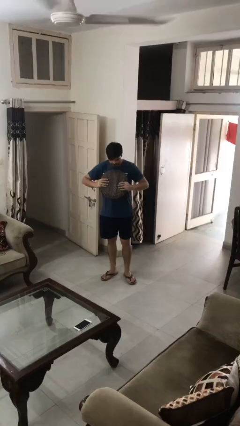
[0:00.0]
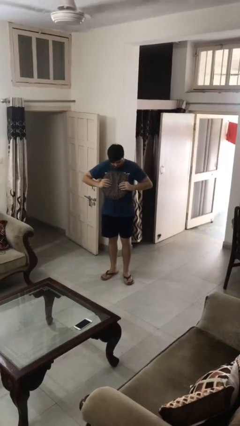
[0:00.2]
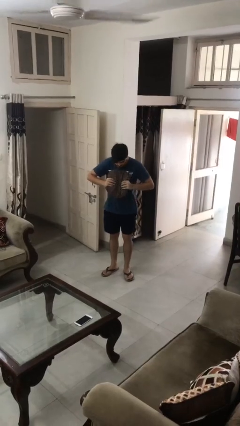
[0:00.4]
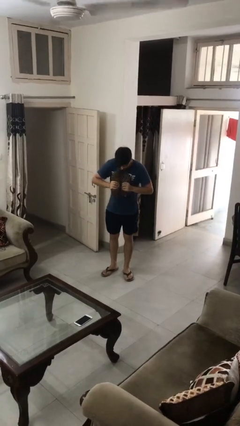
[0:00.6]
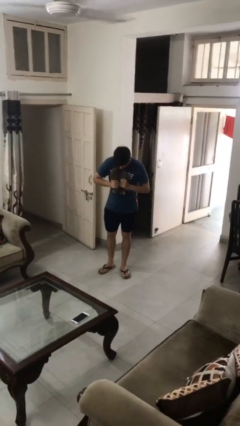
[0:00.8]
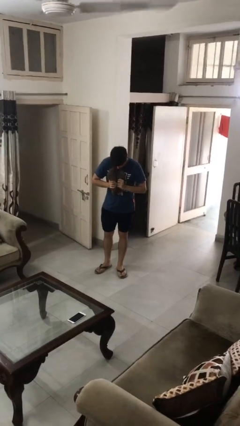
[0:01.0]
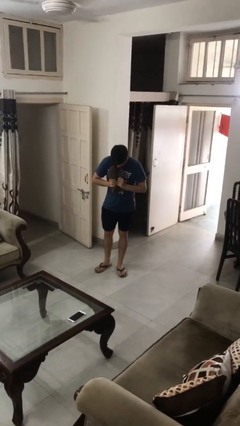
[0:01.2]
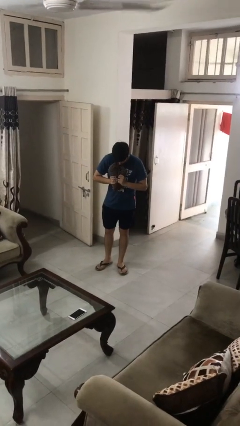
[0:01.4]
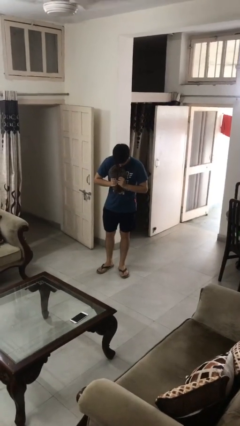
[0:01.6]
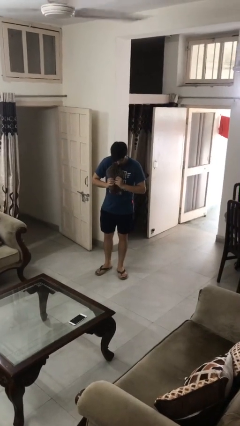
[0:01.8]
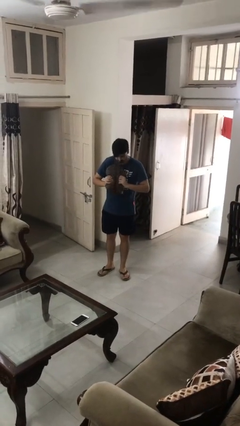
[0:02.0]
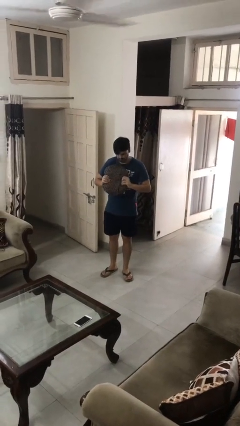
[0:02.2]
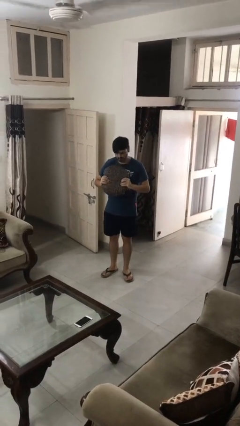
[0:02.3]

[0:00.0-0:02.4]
person squeezes object

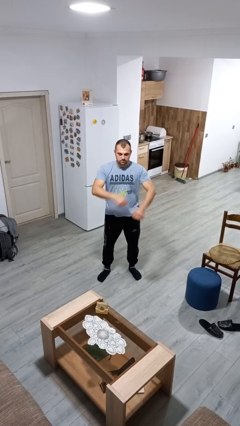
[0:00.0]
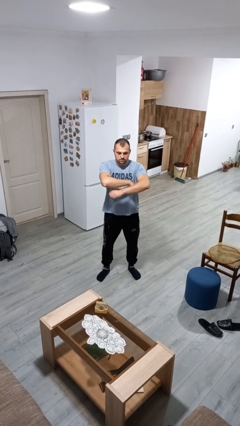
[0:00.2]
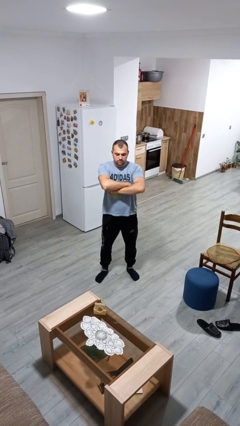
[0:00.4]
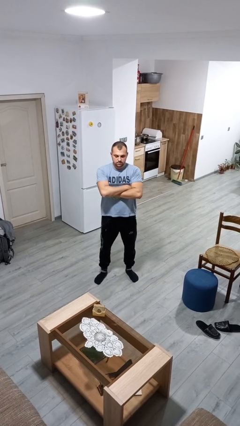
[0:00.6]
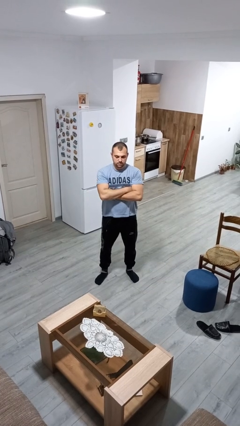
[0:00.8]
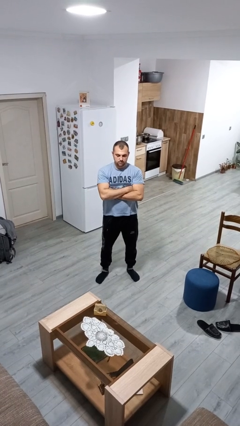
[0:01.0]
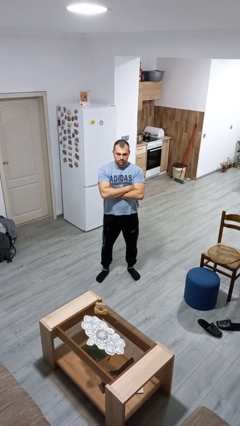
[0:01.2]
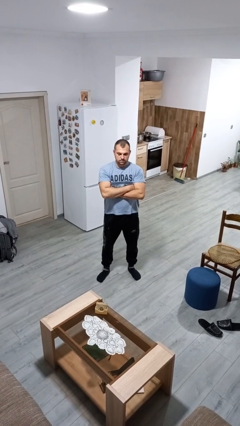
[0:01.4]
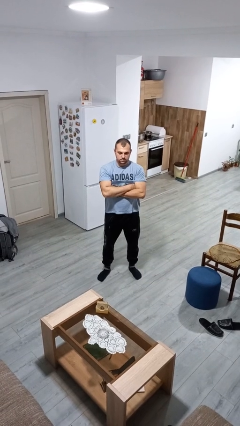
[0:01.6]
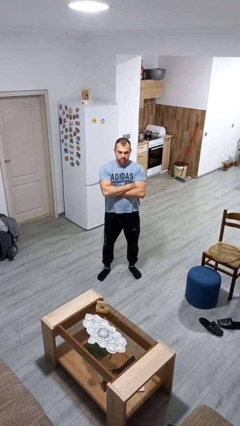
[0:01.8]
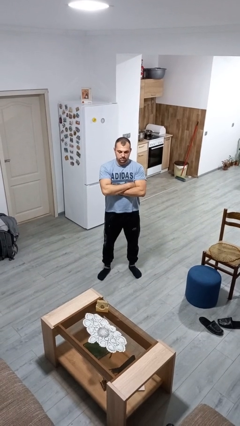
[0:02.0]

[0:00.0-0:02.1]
person crosses arms

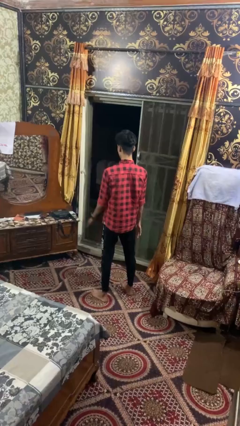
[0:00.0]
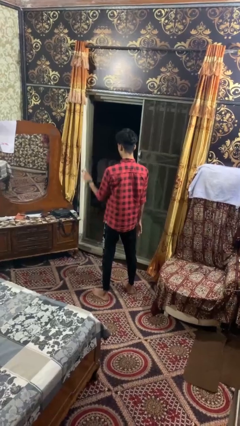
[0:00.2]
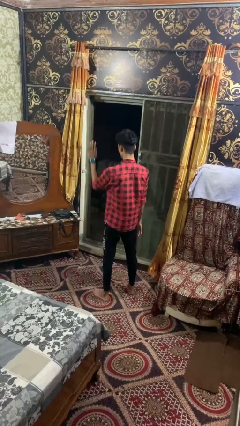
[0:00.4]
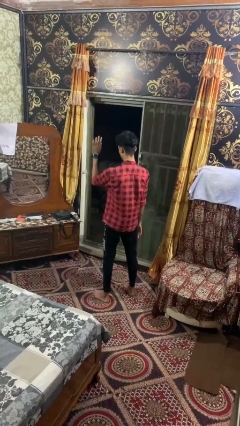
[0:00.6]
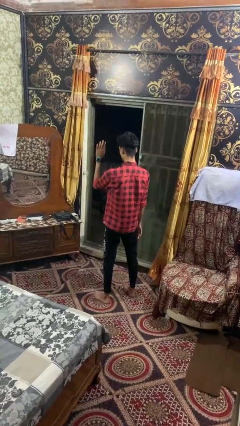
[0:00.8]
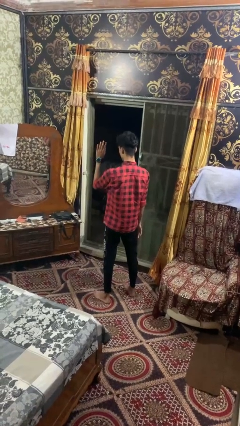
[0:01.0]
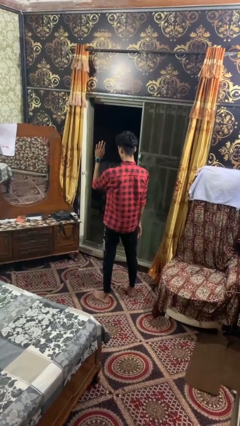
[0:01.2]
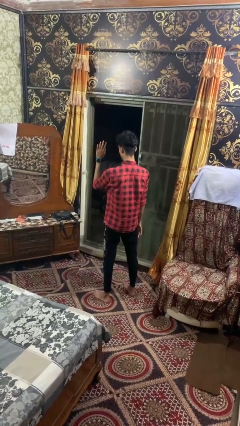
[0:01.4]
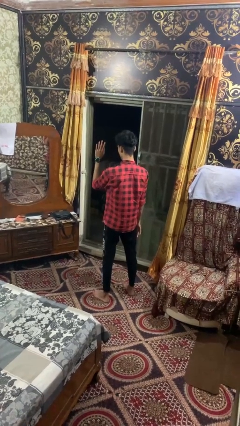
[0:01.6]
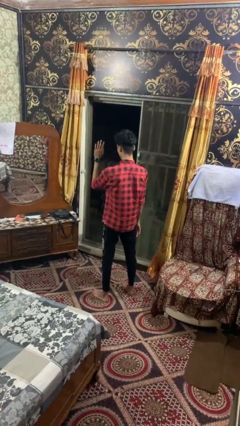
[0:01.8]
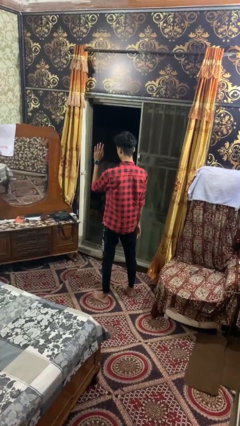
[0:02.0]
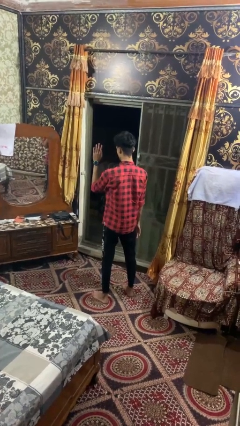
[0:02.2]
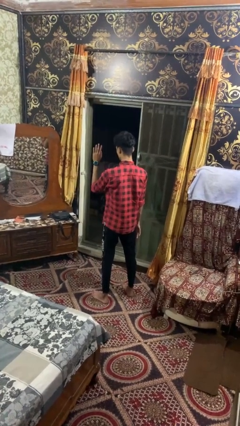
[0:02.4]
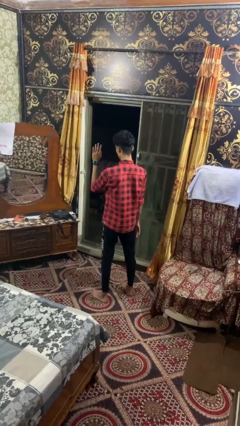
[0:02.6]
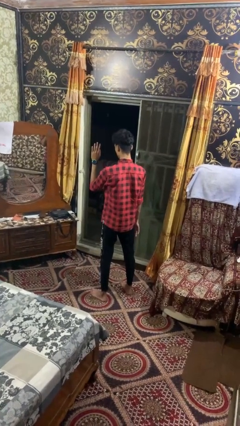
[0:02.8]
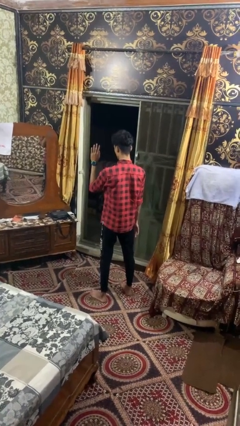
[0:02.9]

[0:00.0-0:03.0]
person gestures swipe left

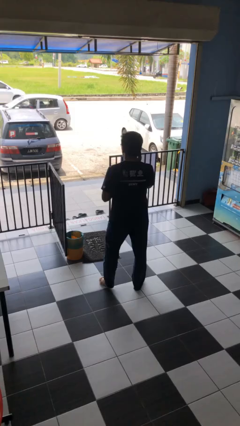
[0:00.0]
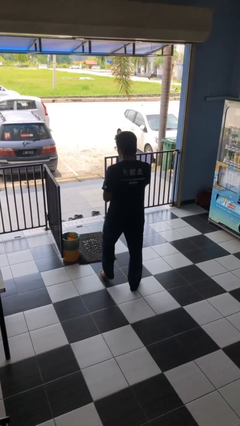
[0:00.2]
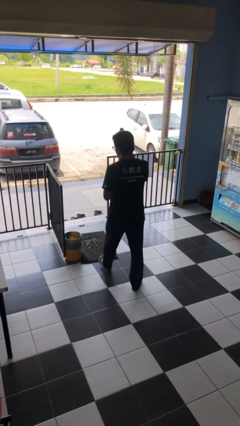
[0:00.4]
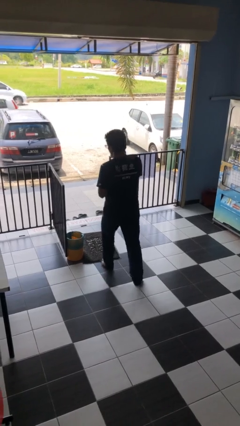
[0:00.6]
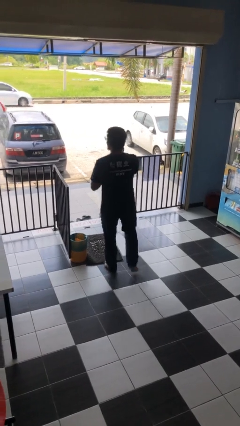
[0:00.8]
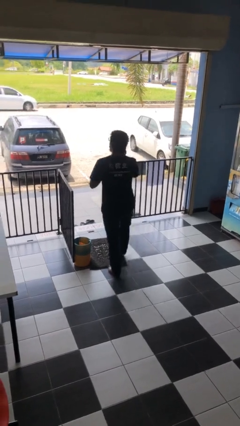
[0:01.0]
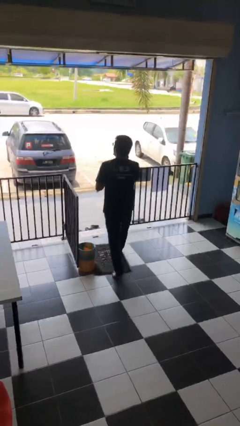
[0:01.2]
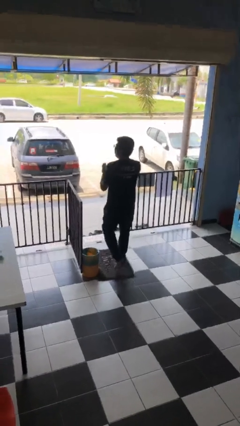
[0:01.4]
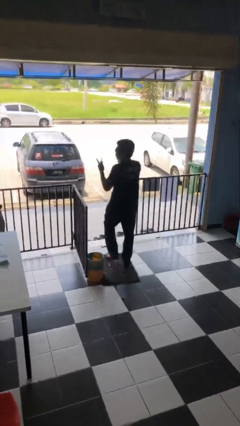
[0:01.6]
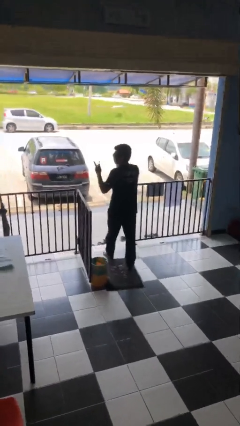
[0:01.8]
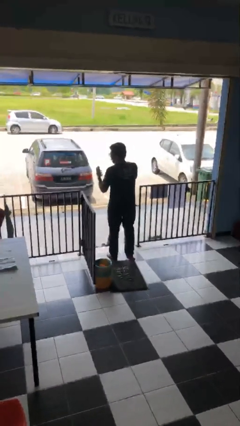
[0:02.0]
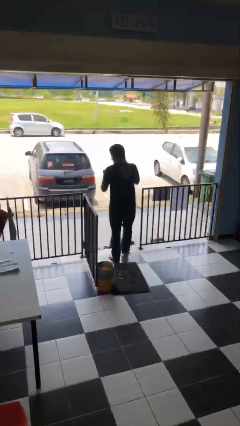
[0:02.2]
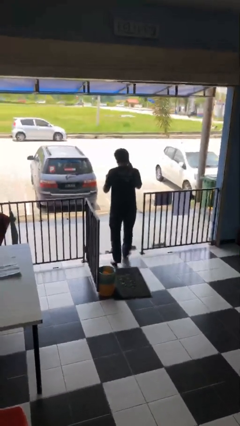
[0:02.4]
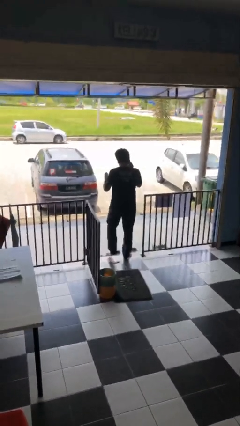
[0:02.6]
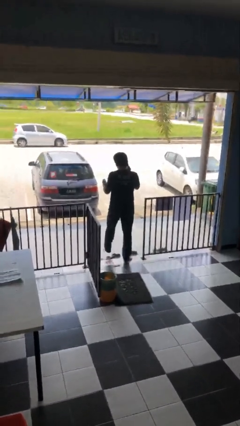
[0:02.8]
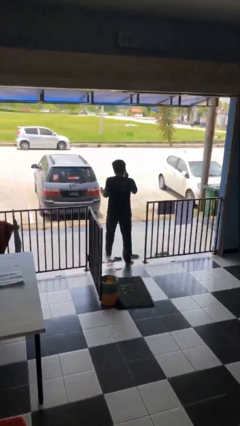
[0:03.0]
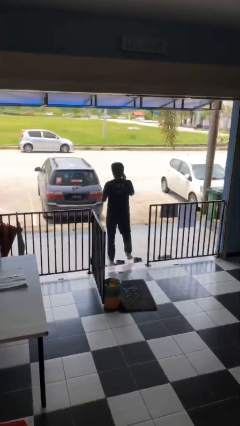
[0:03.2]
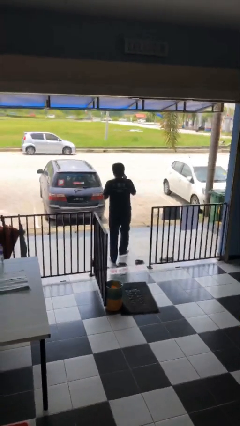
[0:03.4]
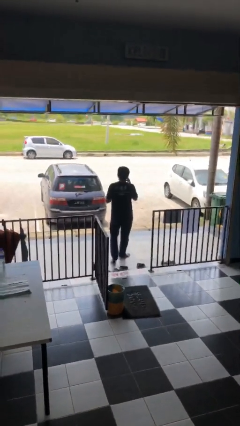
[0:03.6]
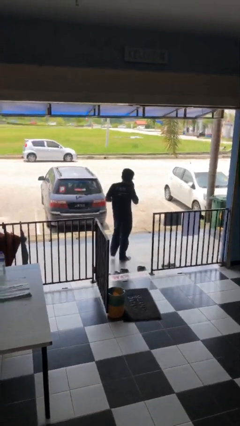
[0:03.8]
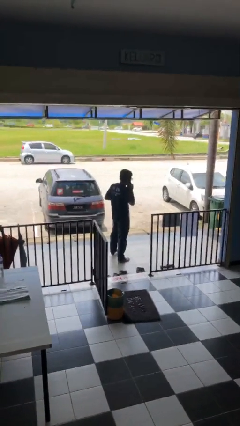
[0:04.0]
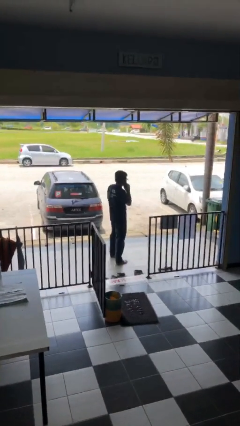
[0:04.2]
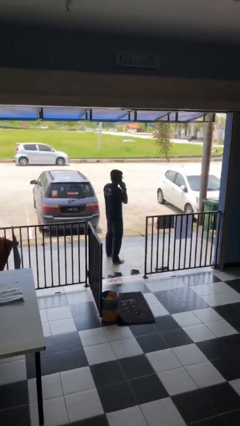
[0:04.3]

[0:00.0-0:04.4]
person exits scene through structure

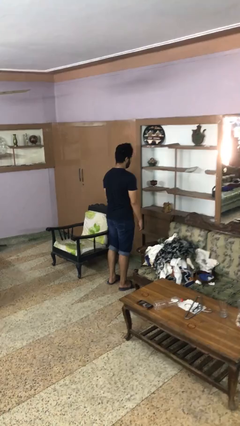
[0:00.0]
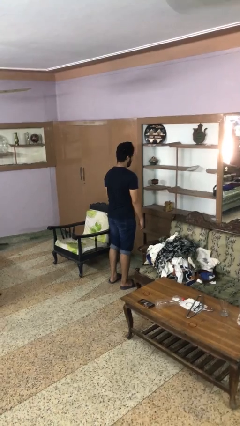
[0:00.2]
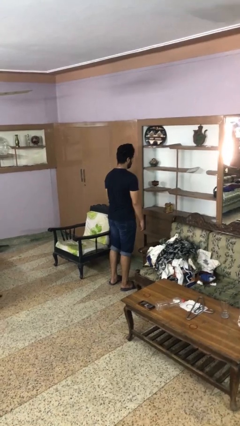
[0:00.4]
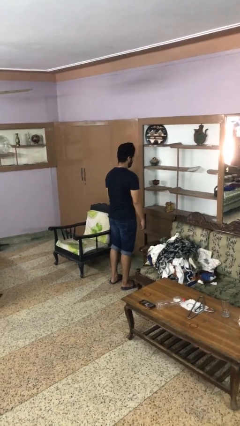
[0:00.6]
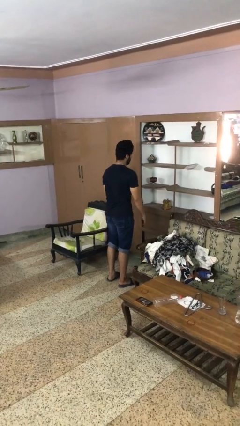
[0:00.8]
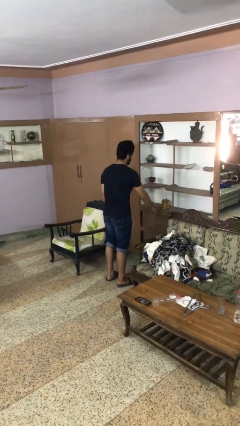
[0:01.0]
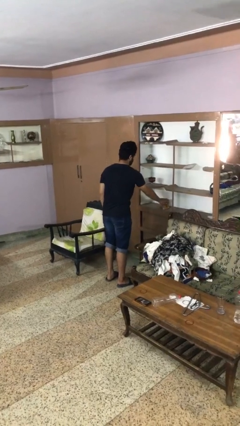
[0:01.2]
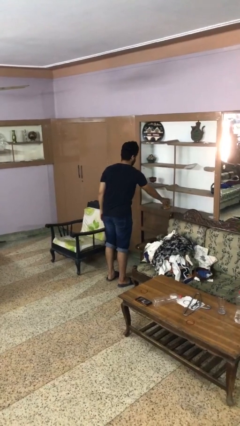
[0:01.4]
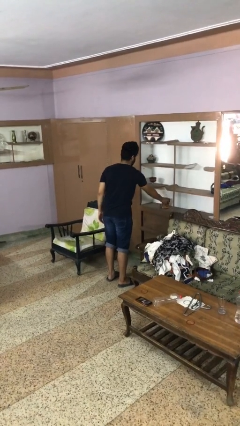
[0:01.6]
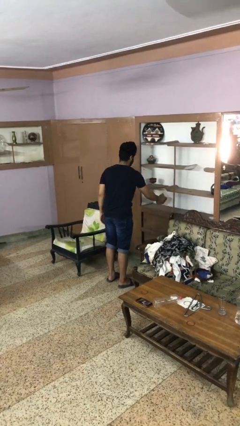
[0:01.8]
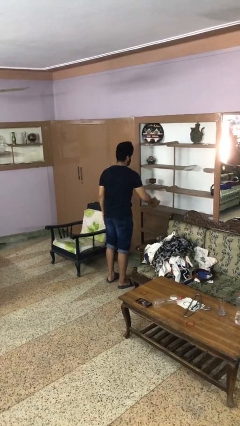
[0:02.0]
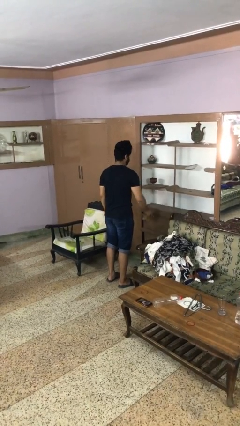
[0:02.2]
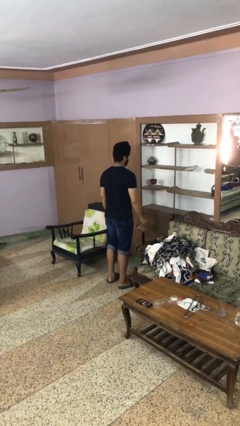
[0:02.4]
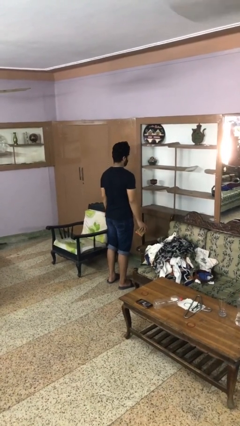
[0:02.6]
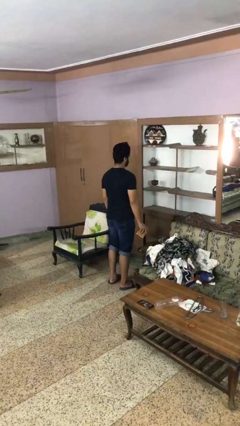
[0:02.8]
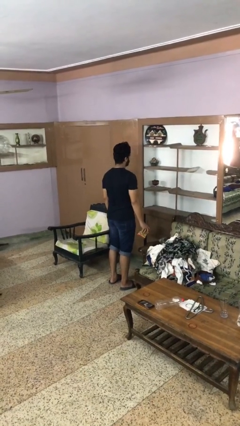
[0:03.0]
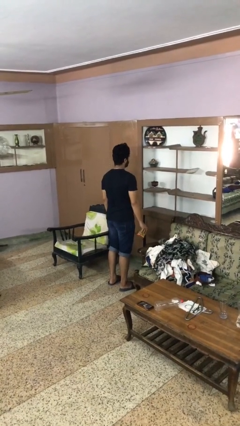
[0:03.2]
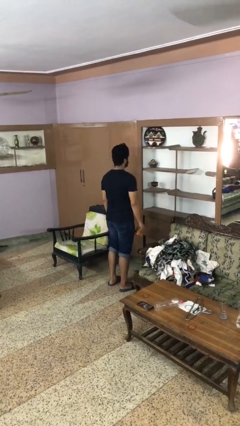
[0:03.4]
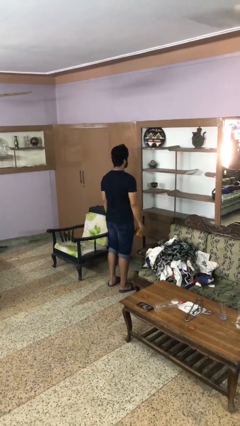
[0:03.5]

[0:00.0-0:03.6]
person picks up object from shelf

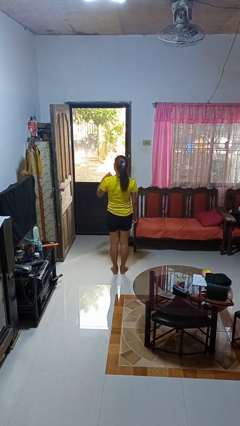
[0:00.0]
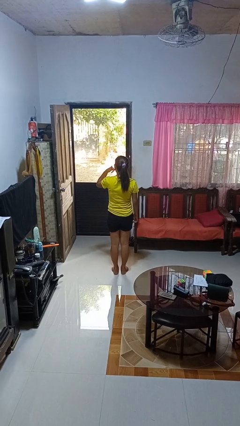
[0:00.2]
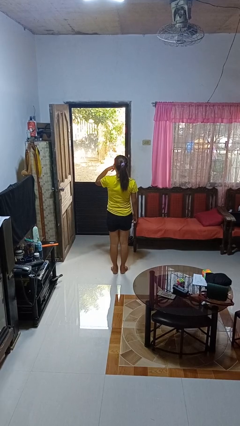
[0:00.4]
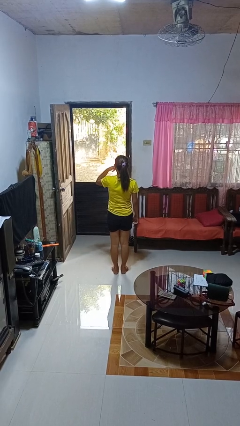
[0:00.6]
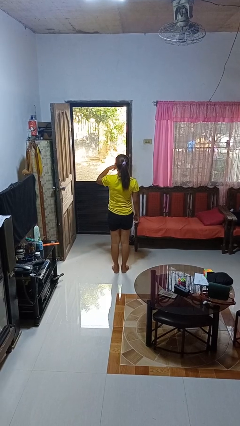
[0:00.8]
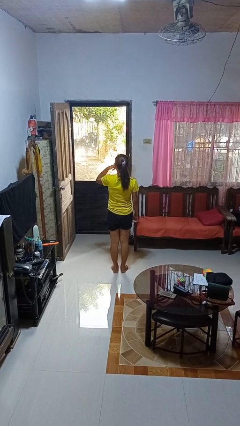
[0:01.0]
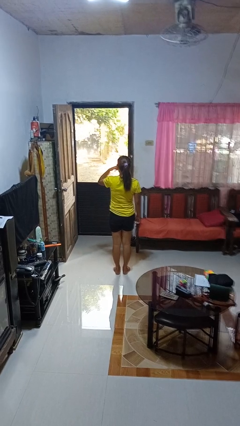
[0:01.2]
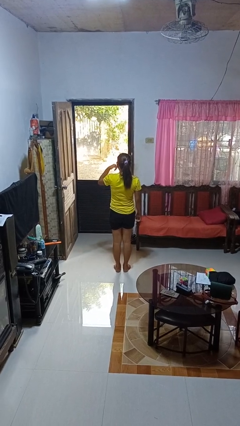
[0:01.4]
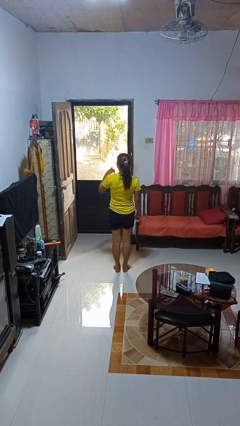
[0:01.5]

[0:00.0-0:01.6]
person gestures call me

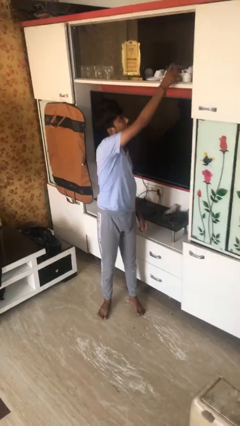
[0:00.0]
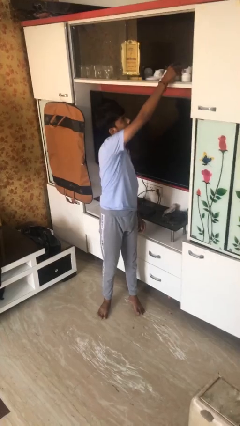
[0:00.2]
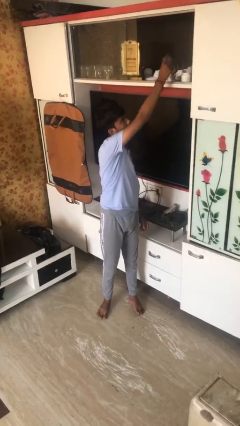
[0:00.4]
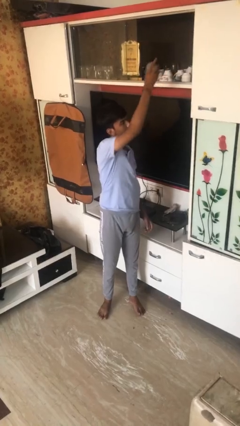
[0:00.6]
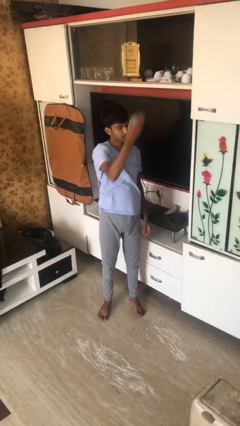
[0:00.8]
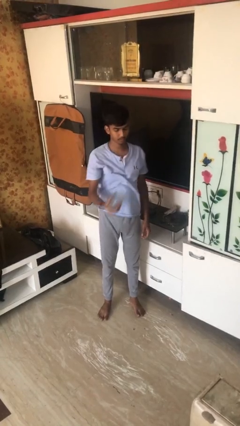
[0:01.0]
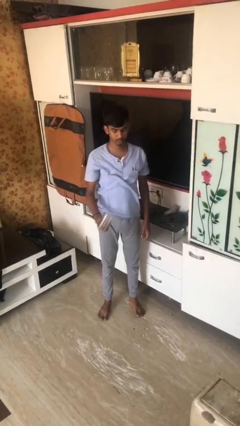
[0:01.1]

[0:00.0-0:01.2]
person takes object from cabinet
